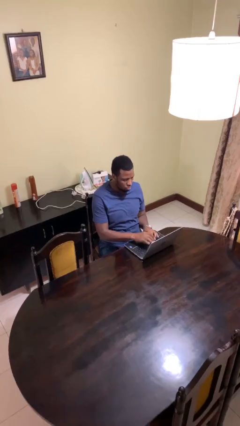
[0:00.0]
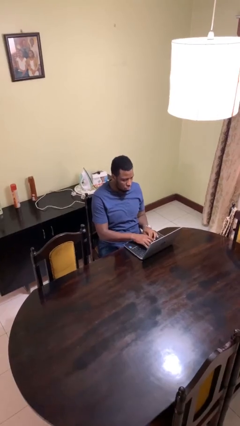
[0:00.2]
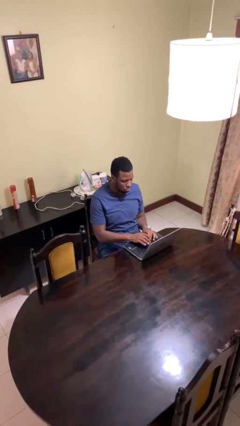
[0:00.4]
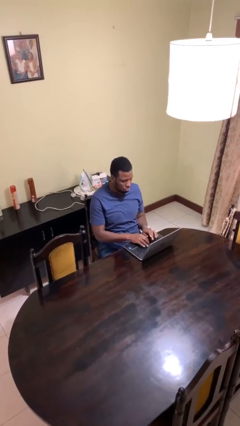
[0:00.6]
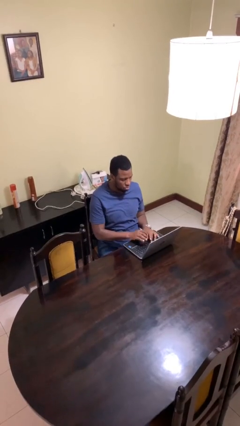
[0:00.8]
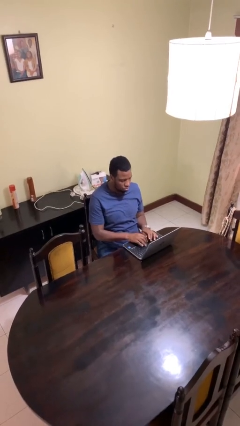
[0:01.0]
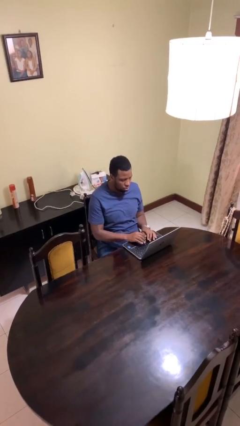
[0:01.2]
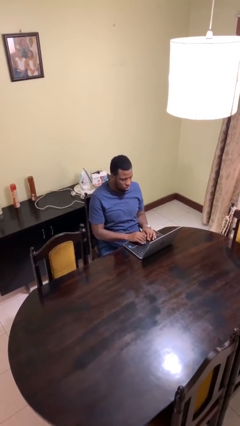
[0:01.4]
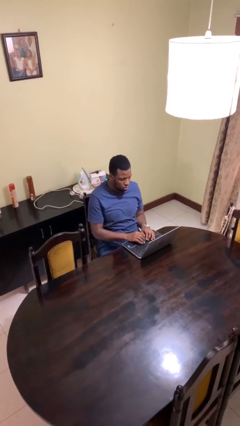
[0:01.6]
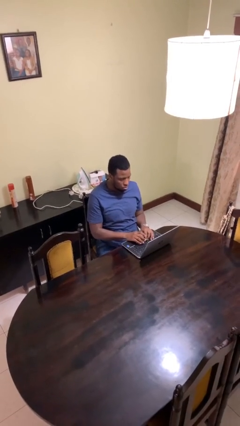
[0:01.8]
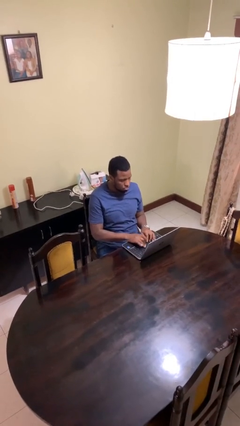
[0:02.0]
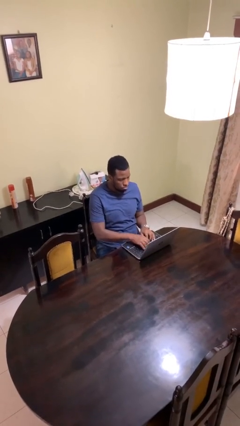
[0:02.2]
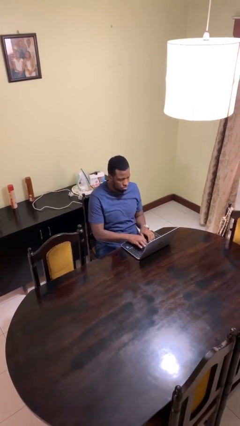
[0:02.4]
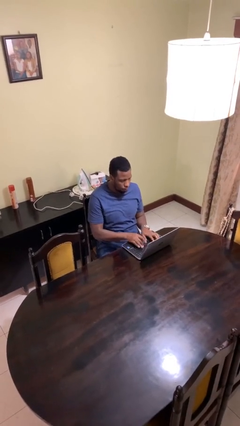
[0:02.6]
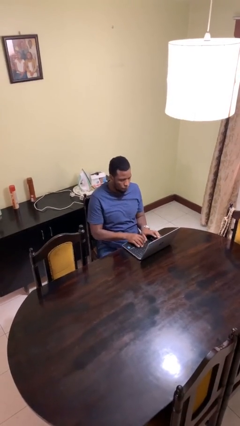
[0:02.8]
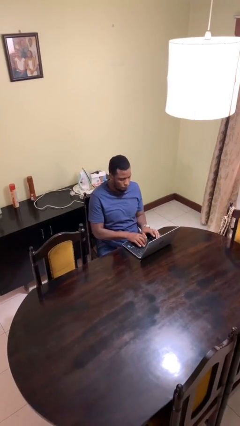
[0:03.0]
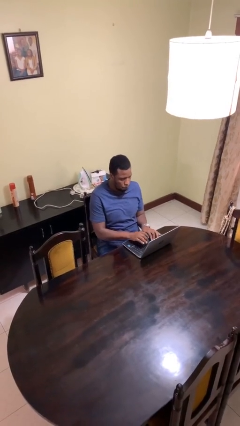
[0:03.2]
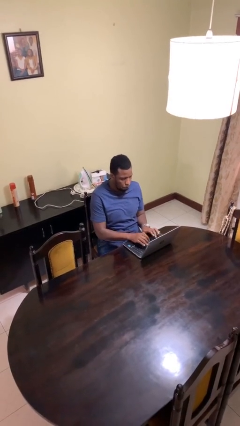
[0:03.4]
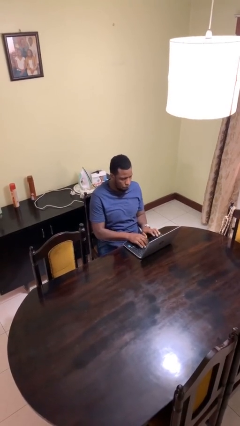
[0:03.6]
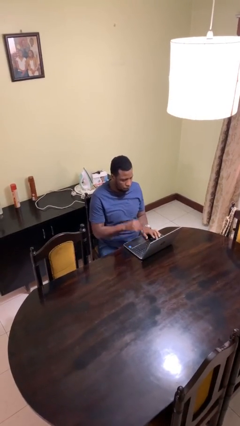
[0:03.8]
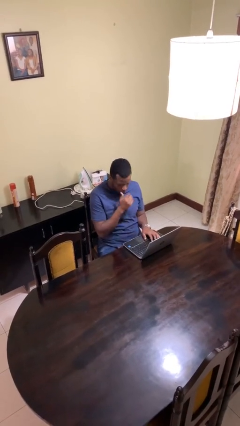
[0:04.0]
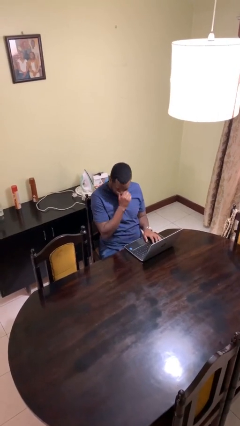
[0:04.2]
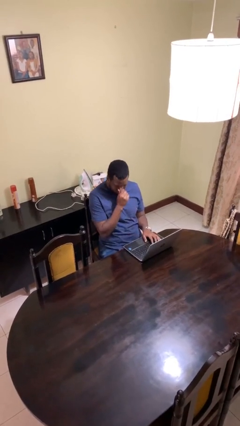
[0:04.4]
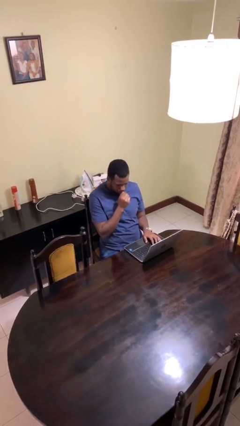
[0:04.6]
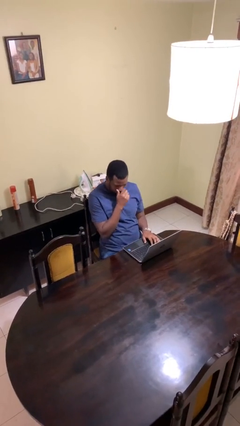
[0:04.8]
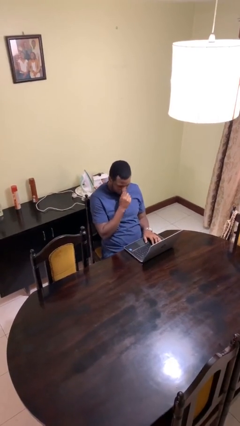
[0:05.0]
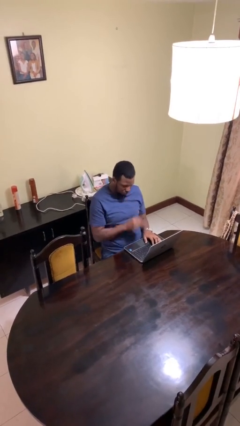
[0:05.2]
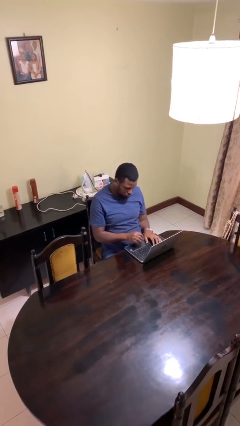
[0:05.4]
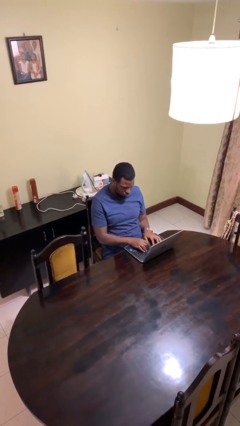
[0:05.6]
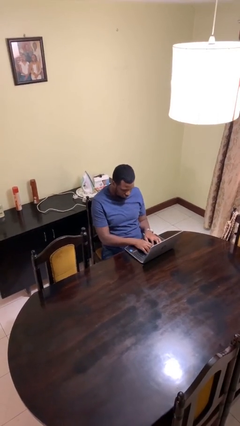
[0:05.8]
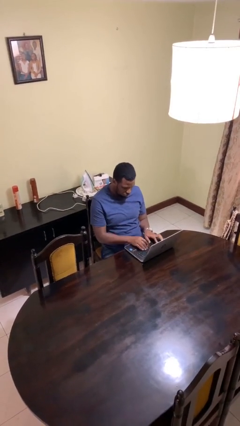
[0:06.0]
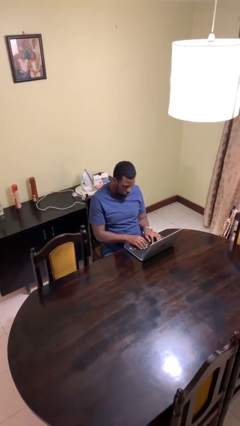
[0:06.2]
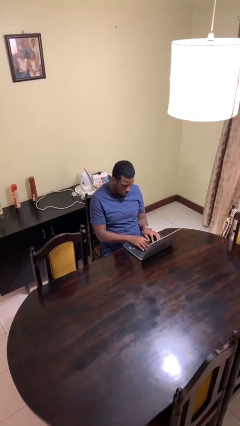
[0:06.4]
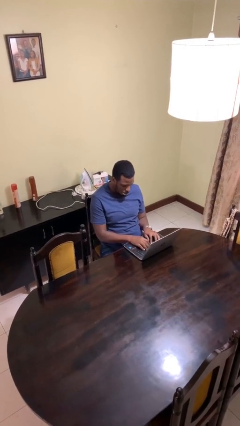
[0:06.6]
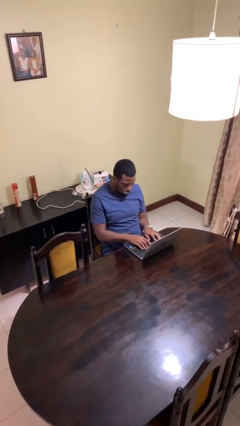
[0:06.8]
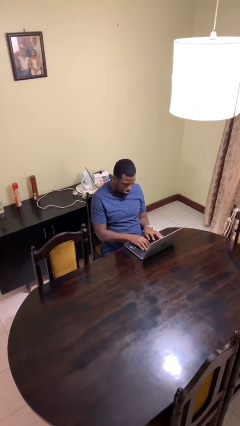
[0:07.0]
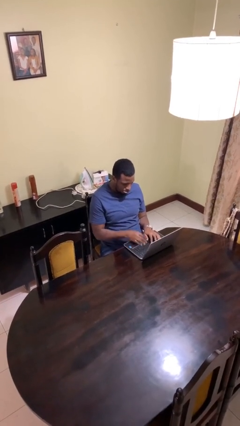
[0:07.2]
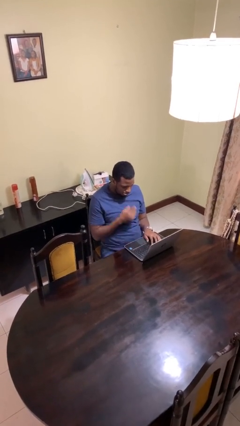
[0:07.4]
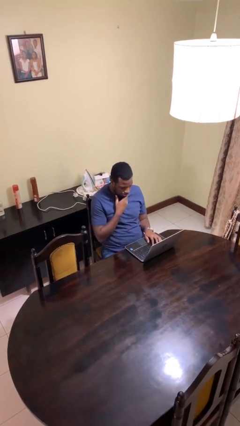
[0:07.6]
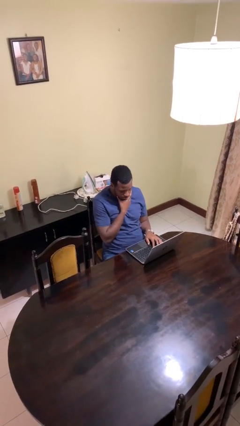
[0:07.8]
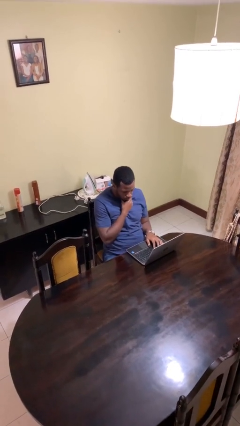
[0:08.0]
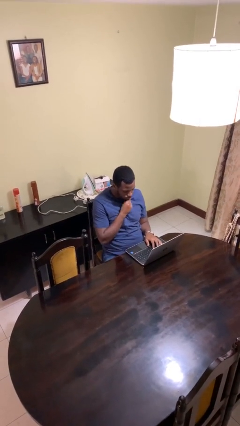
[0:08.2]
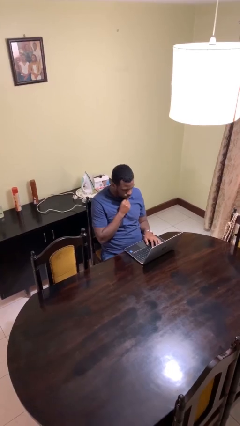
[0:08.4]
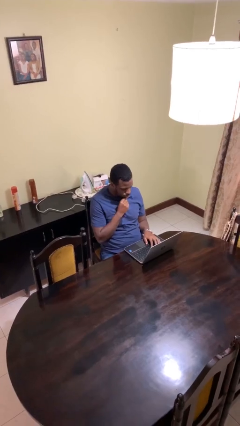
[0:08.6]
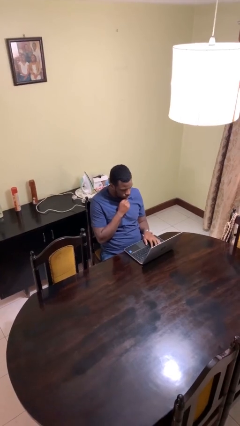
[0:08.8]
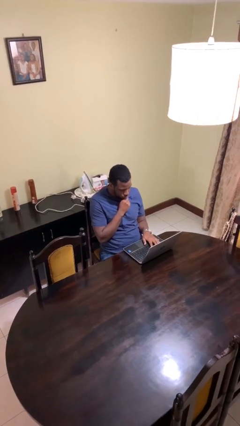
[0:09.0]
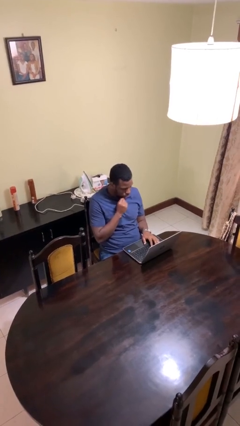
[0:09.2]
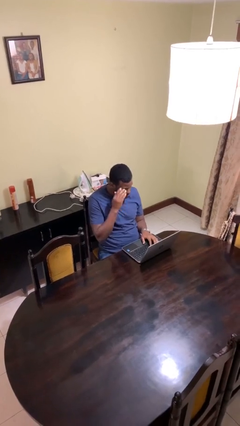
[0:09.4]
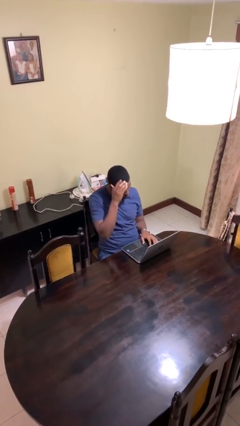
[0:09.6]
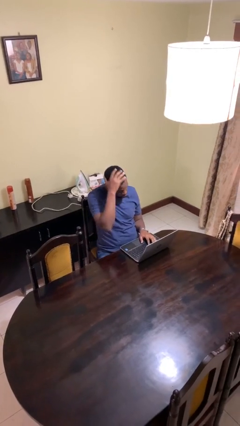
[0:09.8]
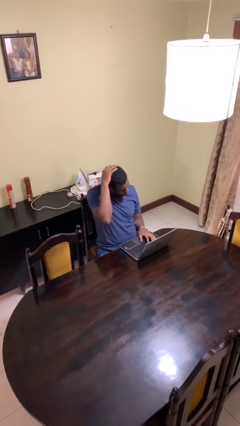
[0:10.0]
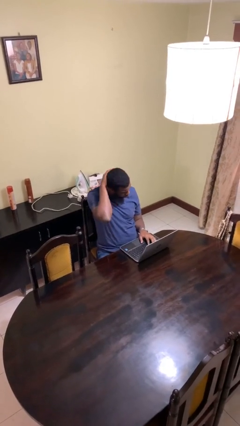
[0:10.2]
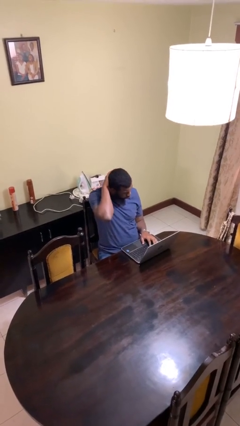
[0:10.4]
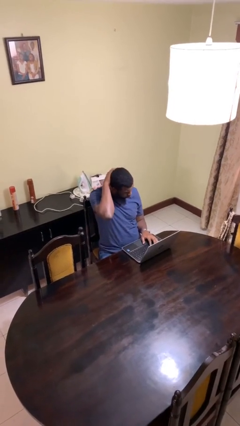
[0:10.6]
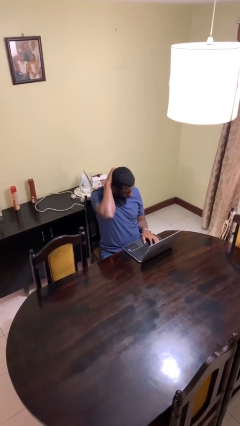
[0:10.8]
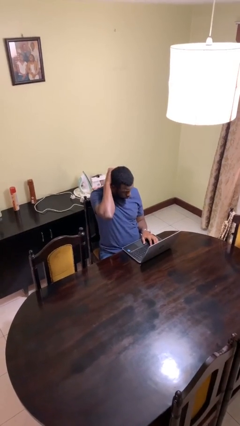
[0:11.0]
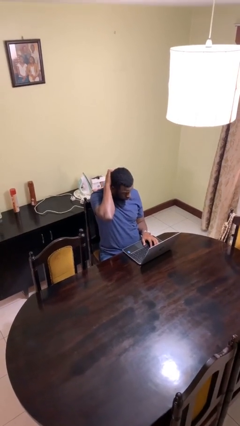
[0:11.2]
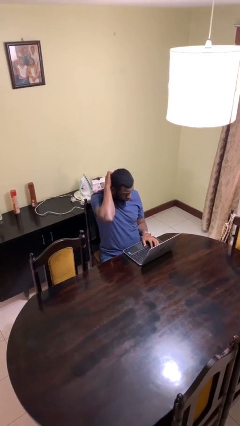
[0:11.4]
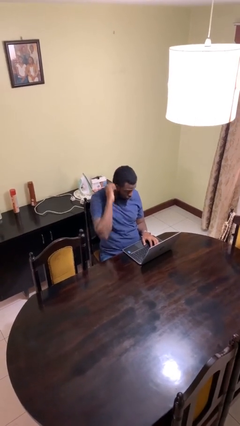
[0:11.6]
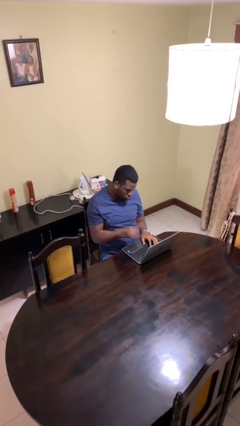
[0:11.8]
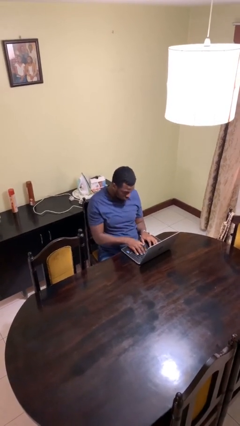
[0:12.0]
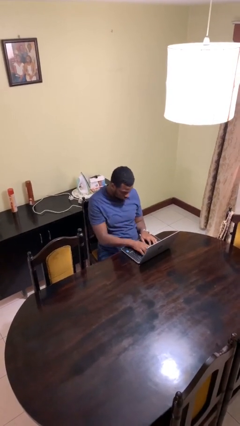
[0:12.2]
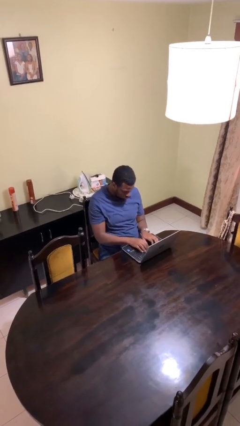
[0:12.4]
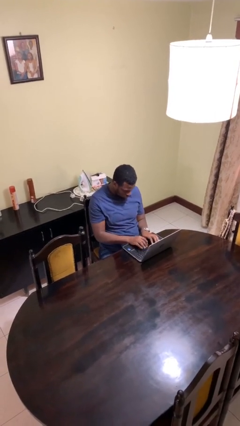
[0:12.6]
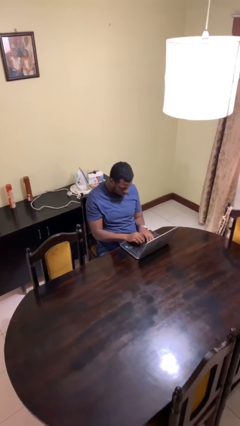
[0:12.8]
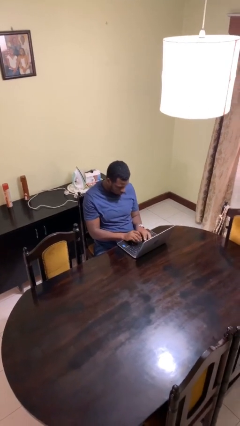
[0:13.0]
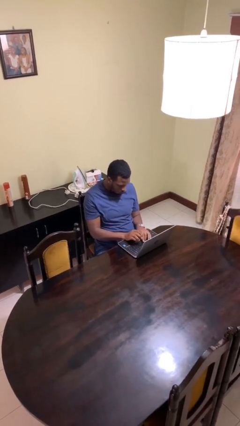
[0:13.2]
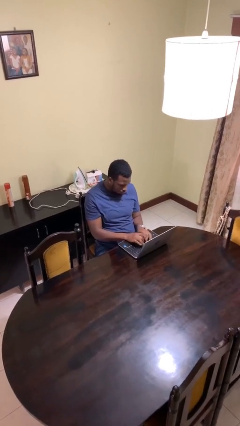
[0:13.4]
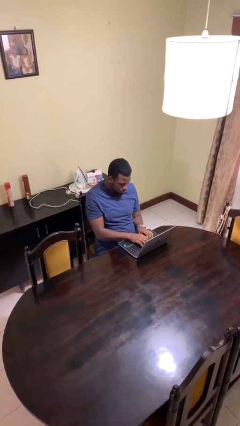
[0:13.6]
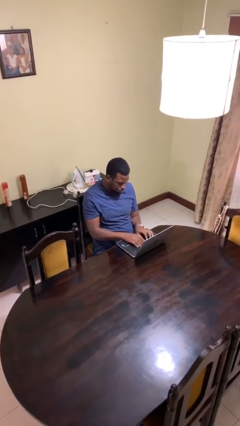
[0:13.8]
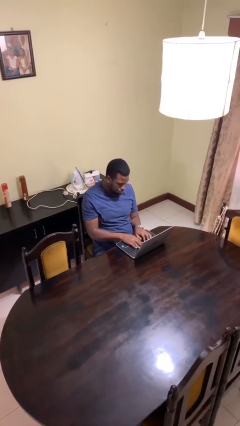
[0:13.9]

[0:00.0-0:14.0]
person interacts with laptop

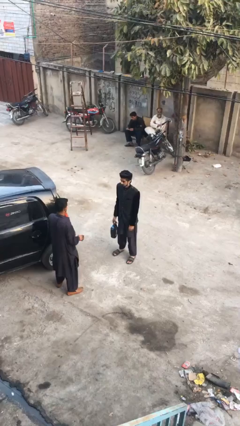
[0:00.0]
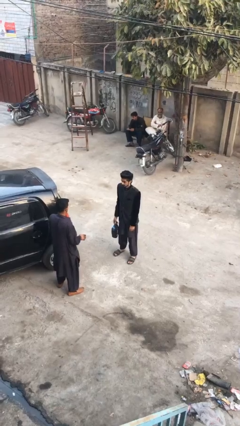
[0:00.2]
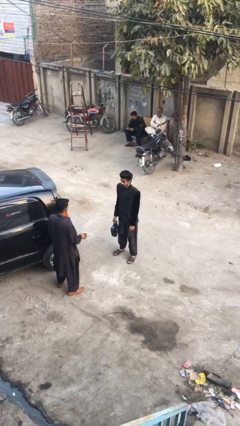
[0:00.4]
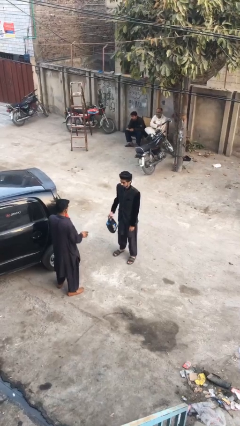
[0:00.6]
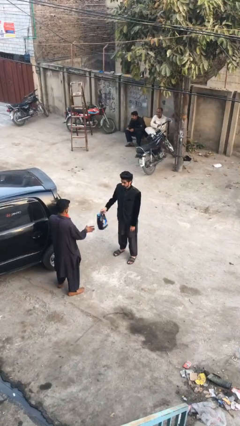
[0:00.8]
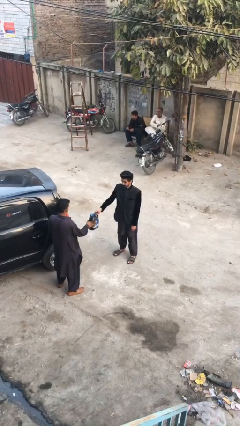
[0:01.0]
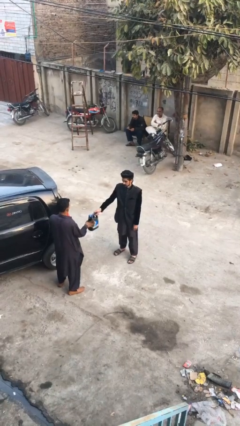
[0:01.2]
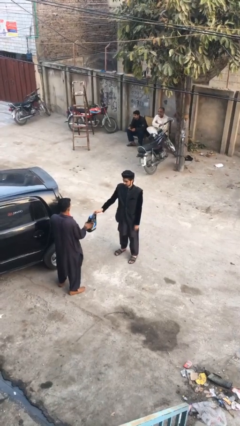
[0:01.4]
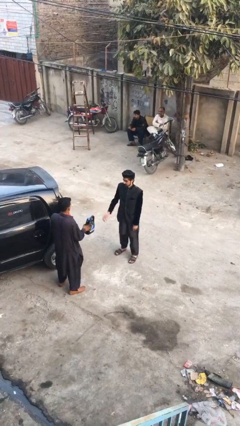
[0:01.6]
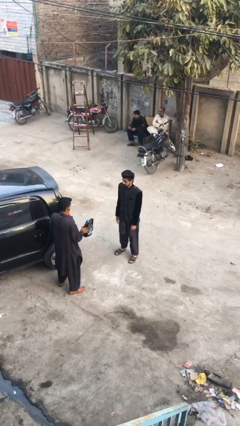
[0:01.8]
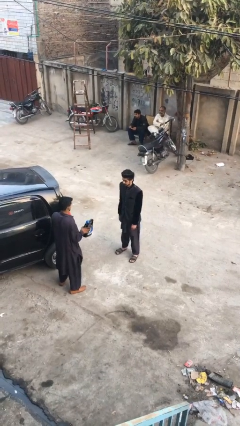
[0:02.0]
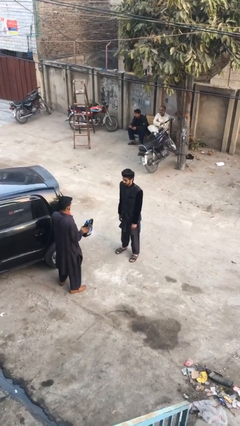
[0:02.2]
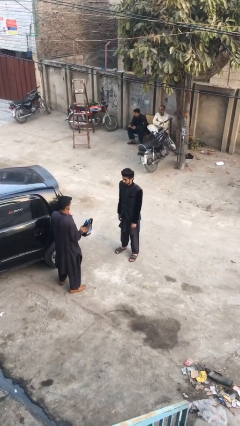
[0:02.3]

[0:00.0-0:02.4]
person transfers object to person

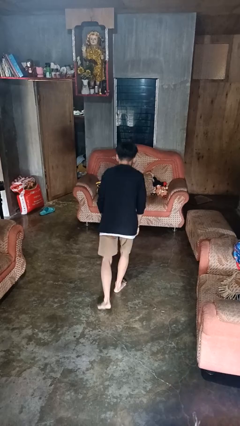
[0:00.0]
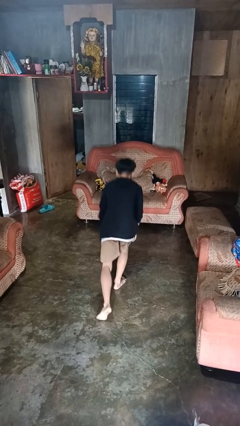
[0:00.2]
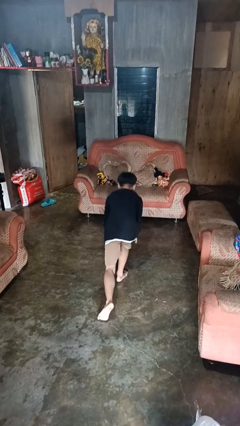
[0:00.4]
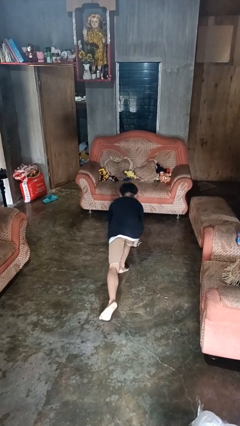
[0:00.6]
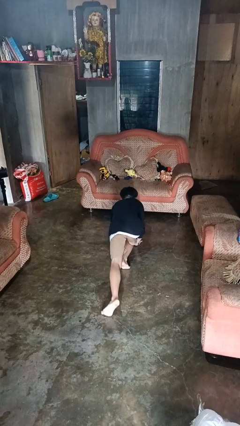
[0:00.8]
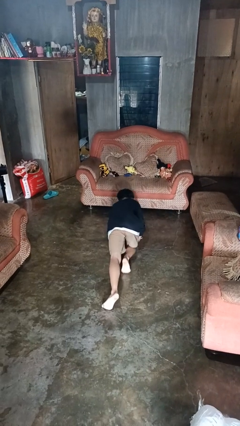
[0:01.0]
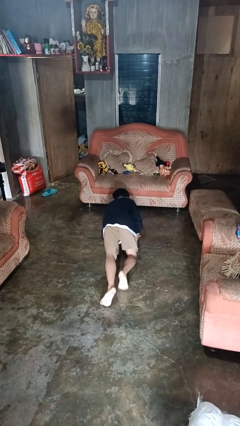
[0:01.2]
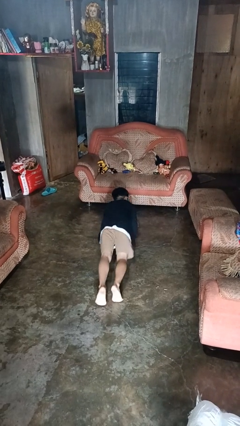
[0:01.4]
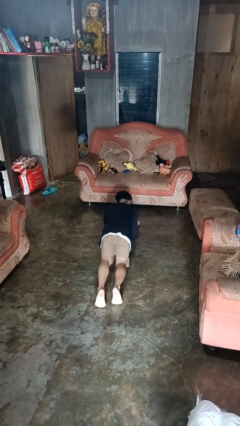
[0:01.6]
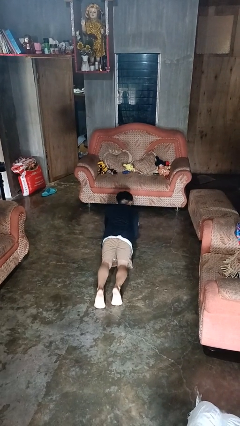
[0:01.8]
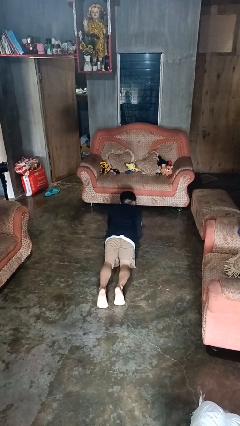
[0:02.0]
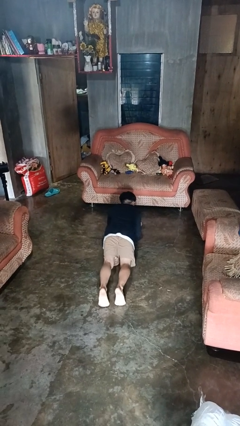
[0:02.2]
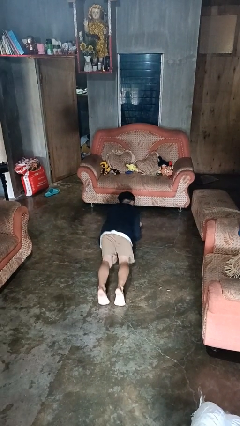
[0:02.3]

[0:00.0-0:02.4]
person exercises with plank
